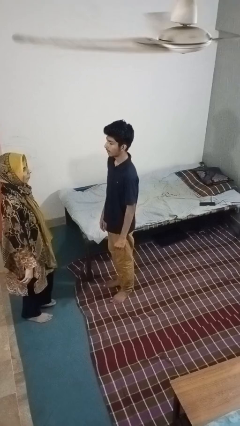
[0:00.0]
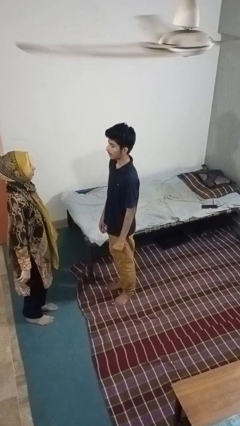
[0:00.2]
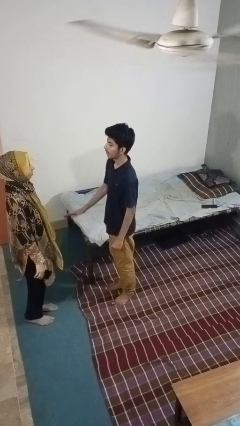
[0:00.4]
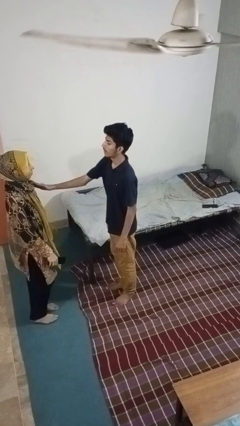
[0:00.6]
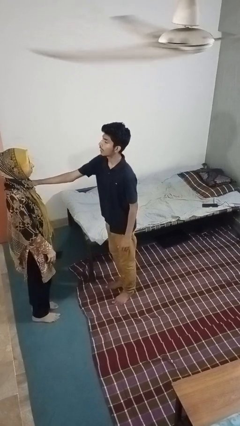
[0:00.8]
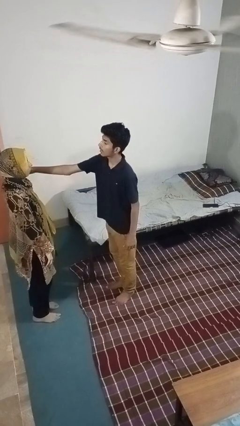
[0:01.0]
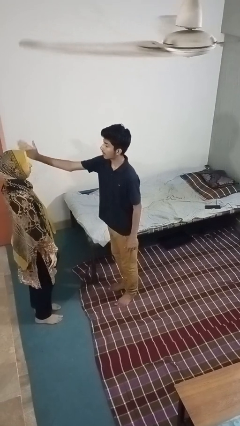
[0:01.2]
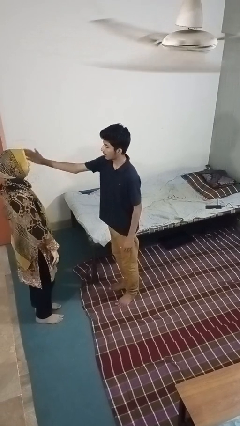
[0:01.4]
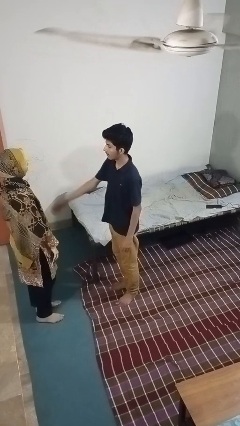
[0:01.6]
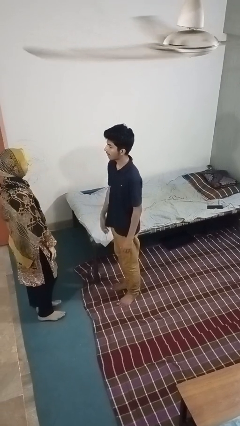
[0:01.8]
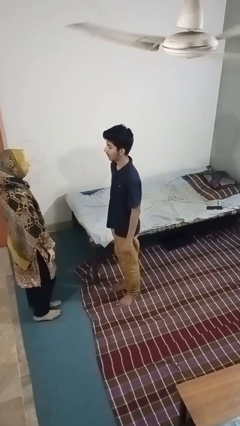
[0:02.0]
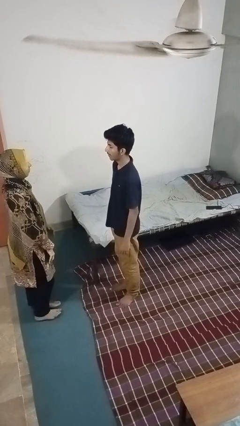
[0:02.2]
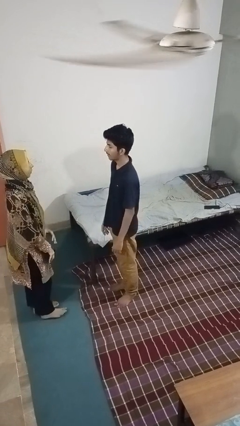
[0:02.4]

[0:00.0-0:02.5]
person shoves person

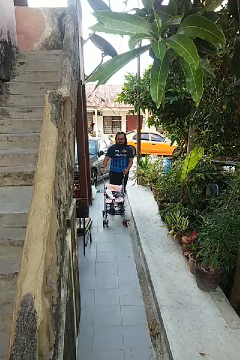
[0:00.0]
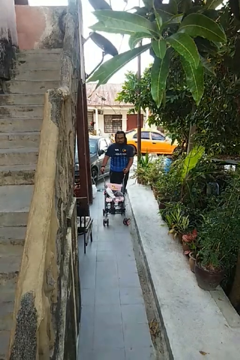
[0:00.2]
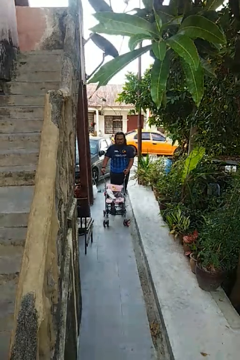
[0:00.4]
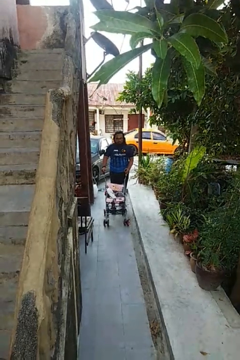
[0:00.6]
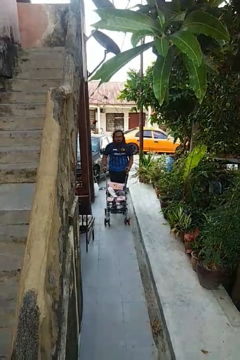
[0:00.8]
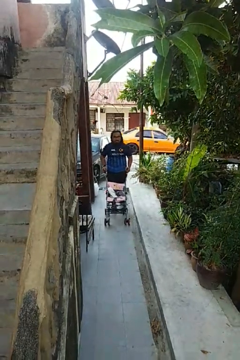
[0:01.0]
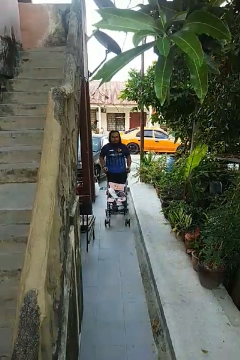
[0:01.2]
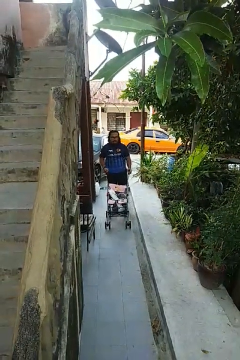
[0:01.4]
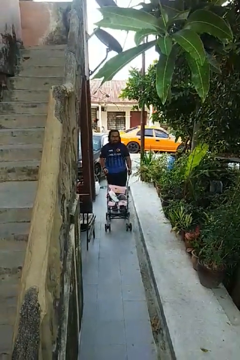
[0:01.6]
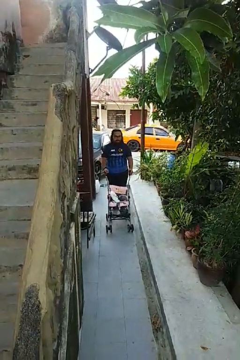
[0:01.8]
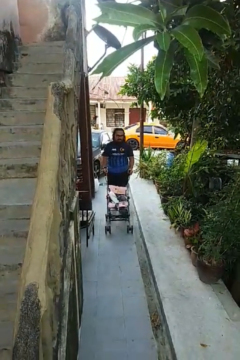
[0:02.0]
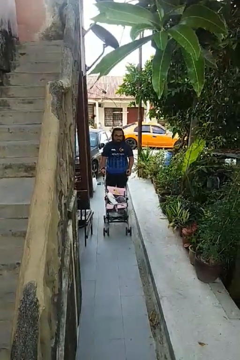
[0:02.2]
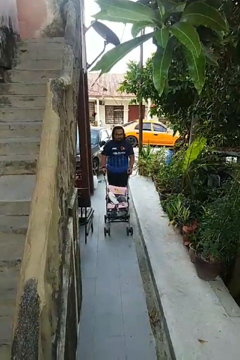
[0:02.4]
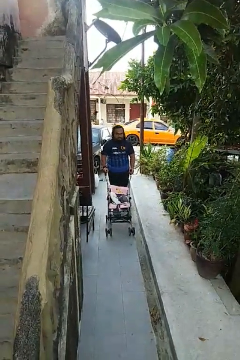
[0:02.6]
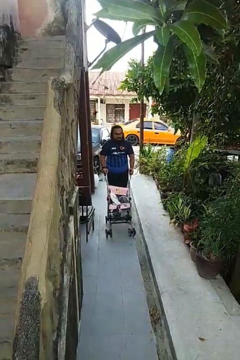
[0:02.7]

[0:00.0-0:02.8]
person pushes wheeled cart

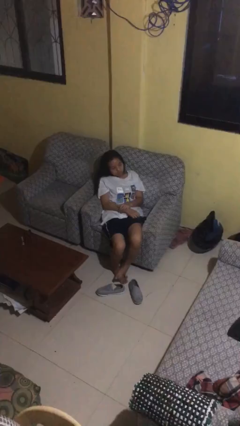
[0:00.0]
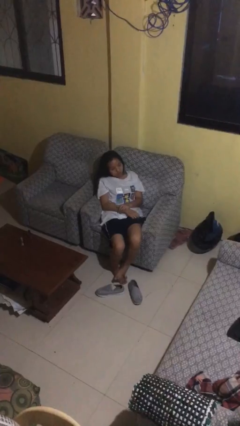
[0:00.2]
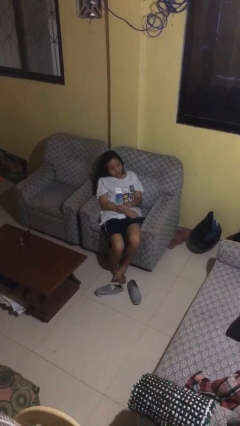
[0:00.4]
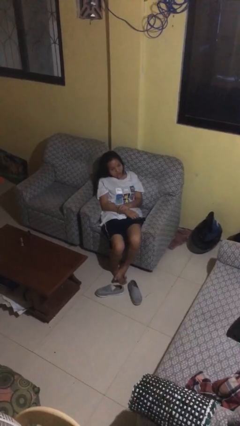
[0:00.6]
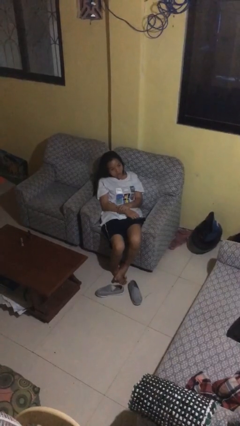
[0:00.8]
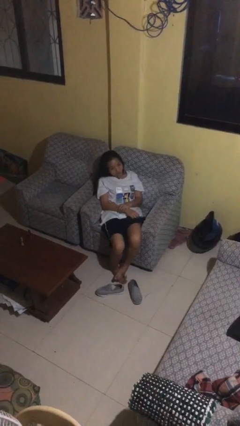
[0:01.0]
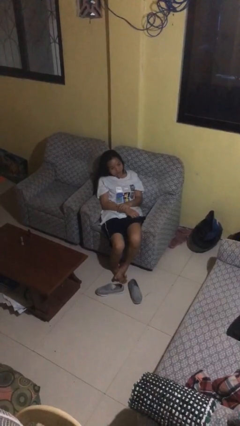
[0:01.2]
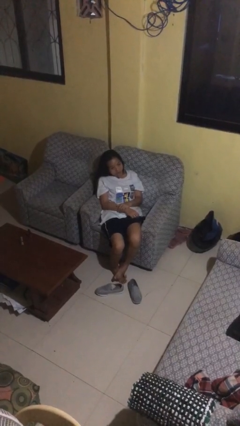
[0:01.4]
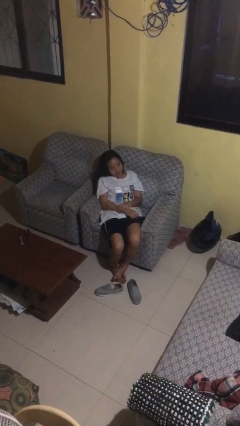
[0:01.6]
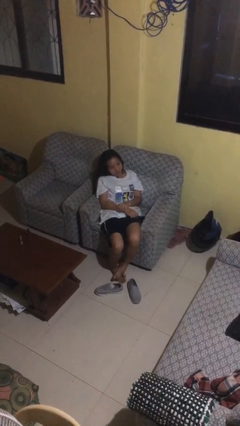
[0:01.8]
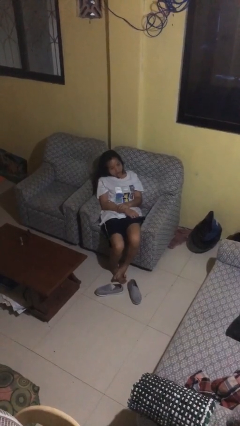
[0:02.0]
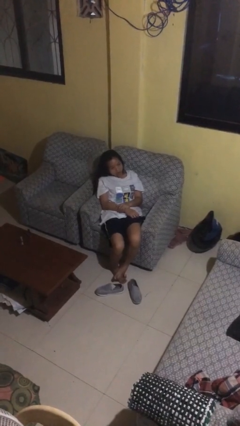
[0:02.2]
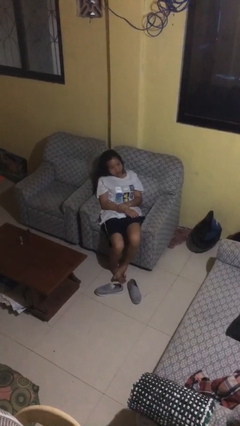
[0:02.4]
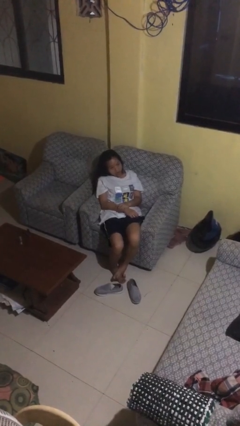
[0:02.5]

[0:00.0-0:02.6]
person sticks out tongue

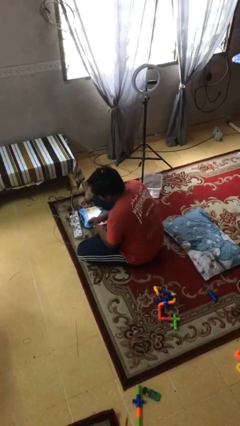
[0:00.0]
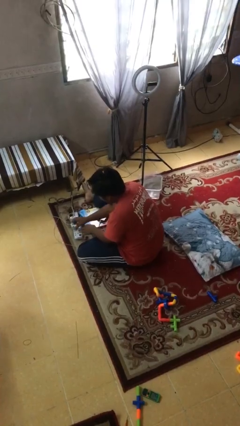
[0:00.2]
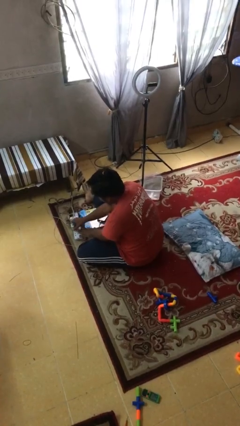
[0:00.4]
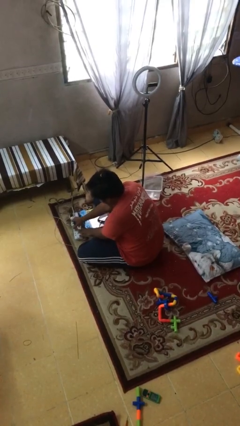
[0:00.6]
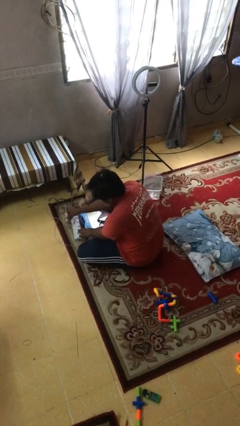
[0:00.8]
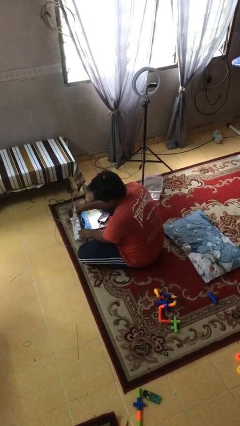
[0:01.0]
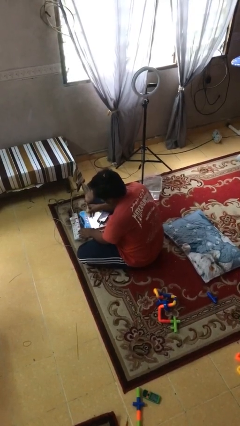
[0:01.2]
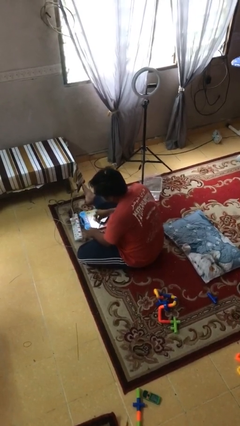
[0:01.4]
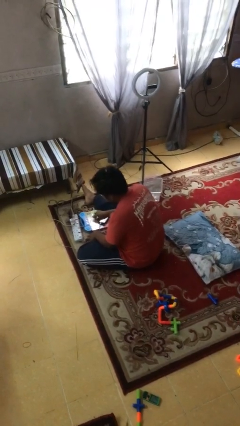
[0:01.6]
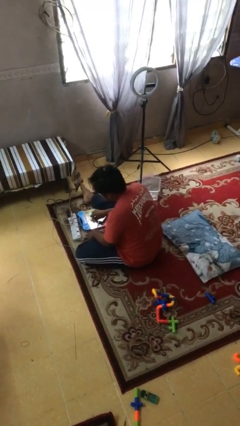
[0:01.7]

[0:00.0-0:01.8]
person unplugs from electrical socket

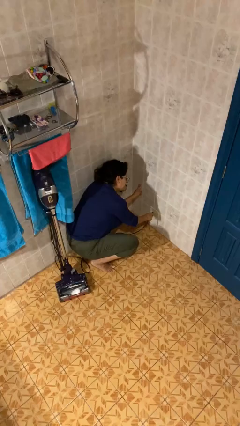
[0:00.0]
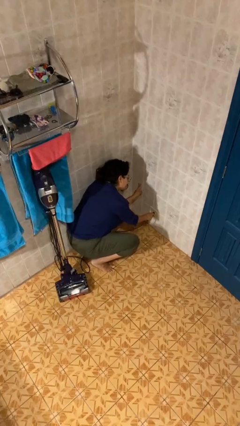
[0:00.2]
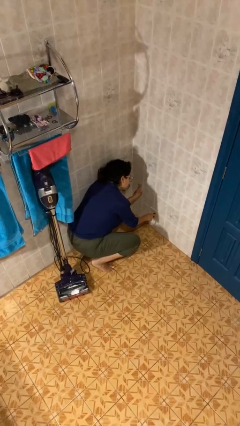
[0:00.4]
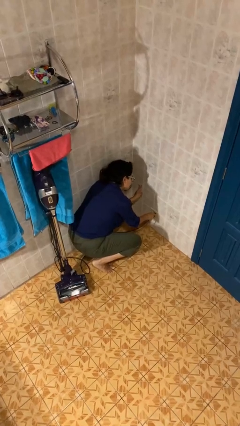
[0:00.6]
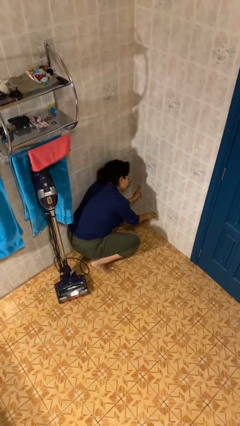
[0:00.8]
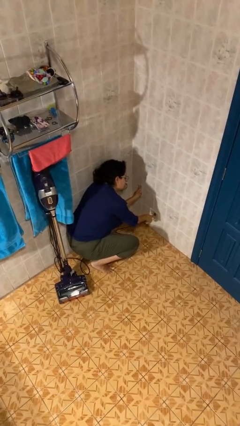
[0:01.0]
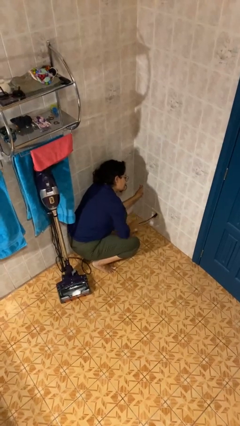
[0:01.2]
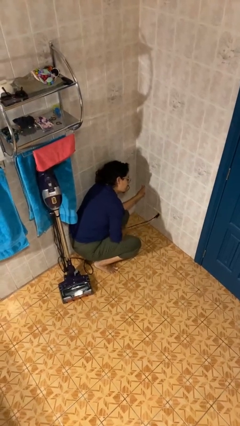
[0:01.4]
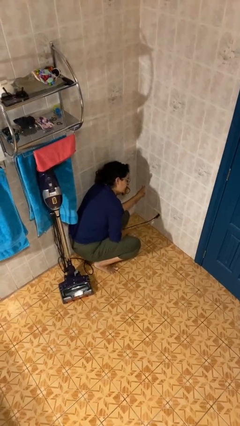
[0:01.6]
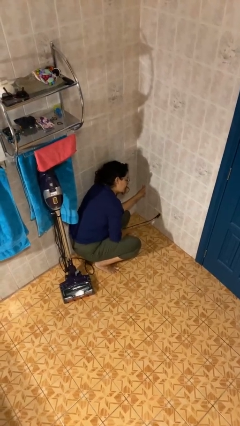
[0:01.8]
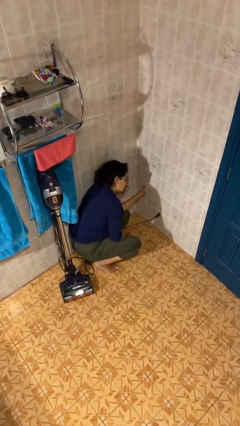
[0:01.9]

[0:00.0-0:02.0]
person plugs into electrical socket

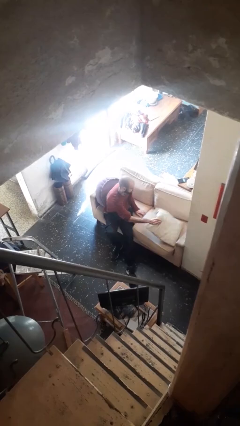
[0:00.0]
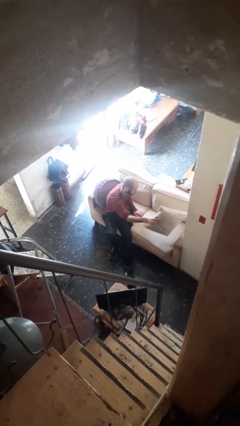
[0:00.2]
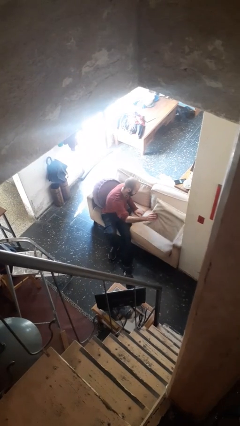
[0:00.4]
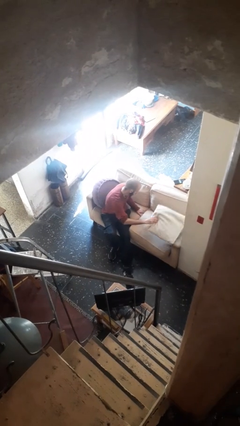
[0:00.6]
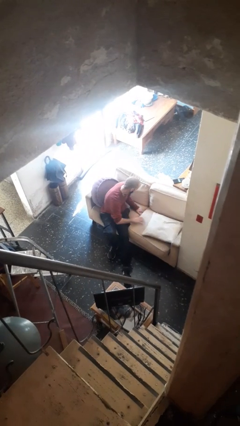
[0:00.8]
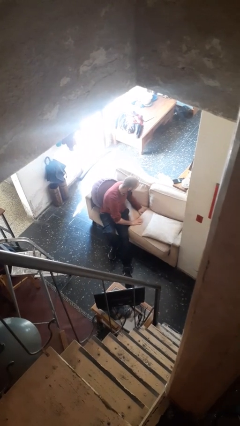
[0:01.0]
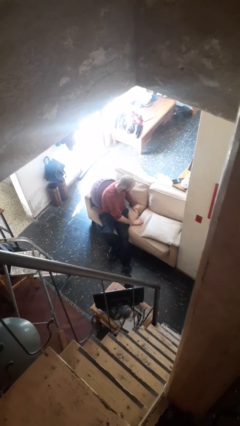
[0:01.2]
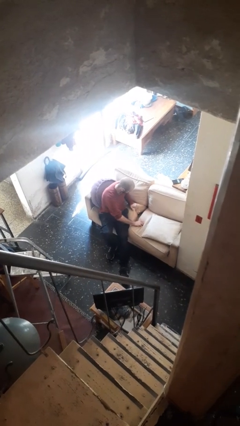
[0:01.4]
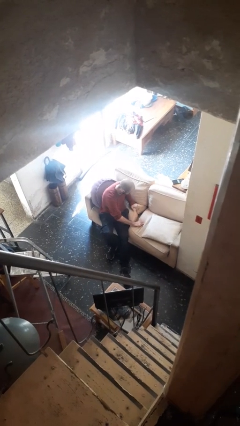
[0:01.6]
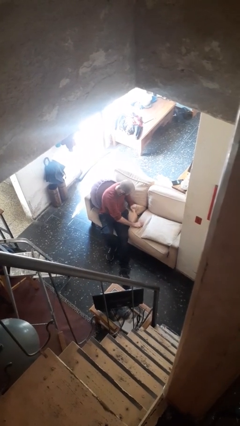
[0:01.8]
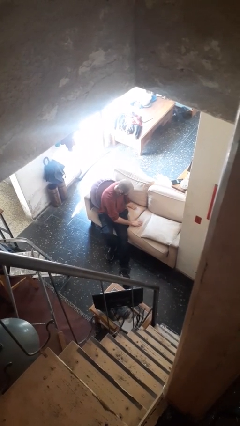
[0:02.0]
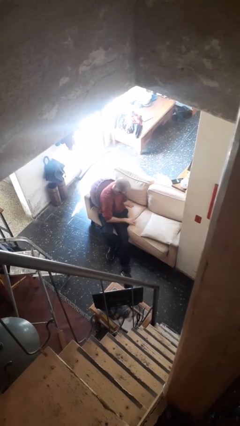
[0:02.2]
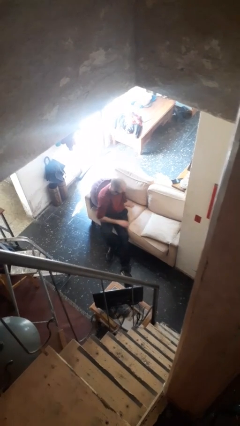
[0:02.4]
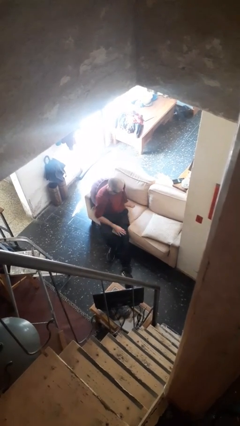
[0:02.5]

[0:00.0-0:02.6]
person searches in couch

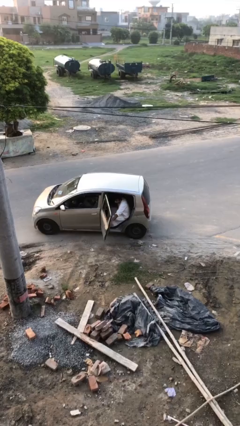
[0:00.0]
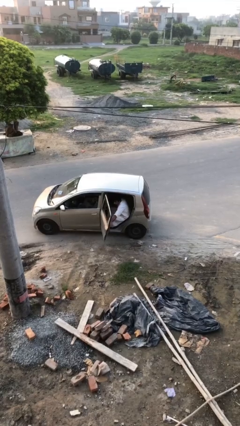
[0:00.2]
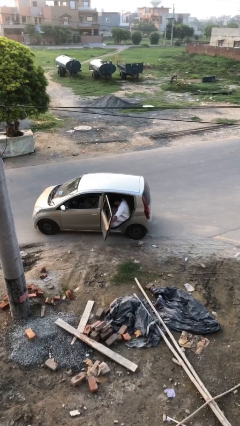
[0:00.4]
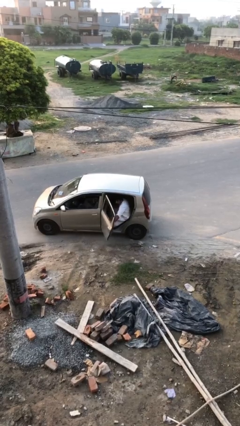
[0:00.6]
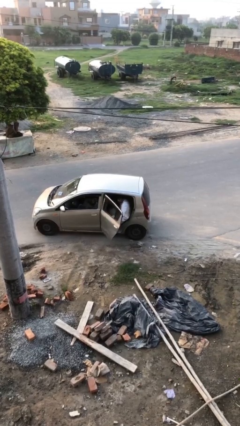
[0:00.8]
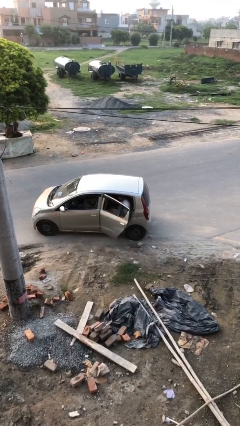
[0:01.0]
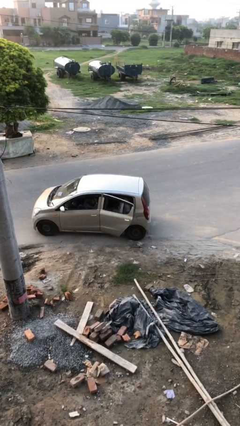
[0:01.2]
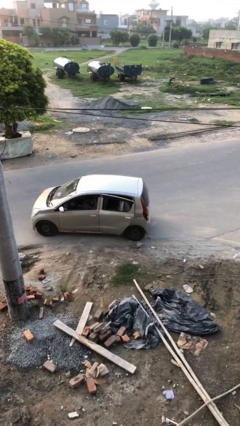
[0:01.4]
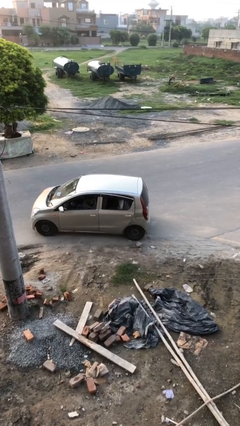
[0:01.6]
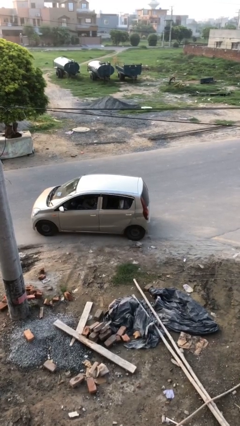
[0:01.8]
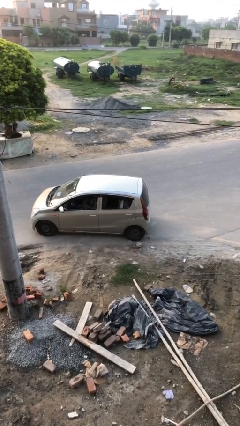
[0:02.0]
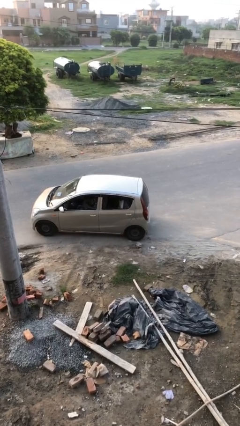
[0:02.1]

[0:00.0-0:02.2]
person closes car door

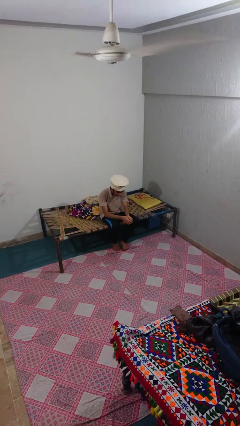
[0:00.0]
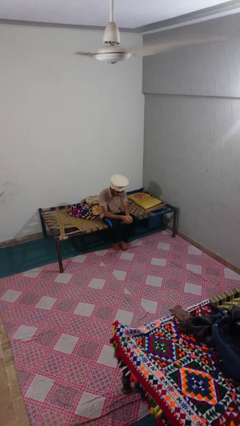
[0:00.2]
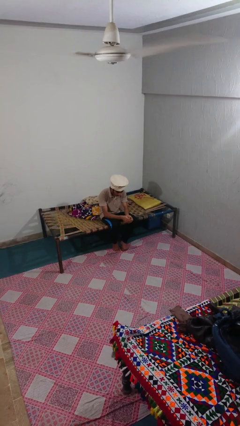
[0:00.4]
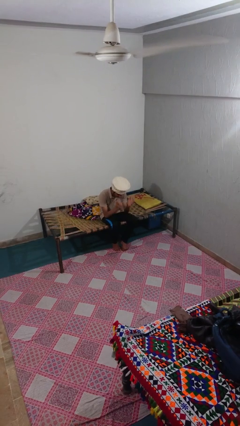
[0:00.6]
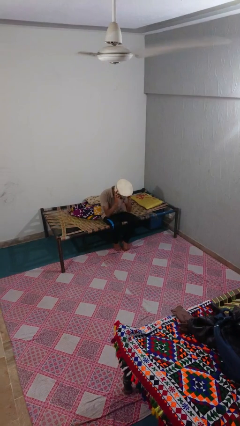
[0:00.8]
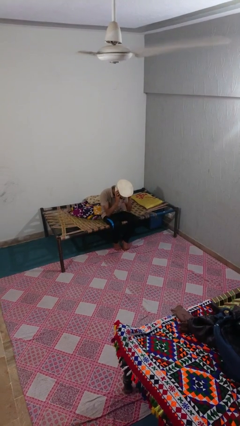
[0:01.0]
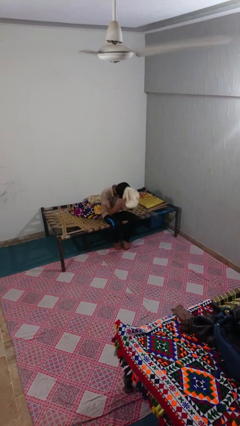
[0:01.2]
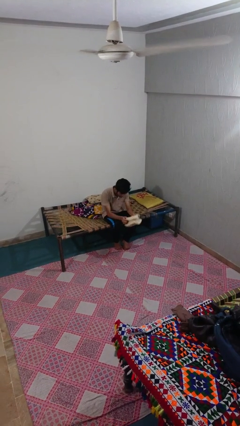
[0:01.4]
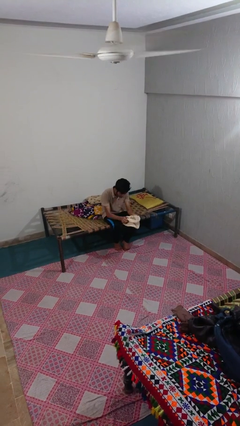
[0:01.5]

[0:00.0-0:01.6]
person takes off hat
